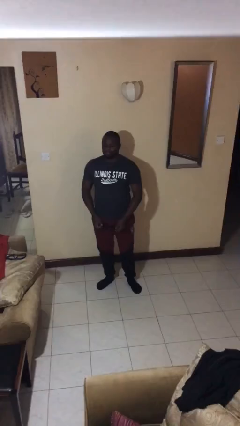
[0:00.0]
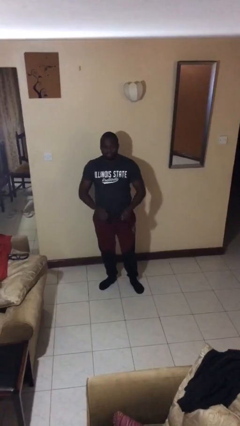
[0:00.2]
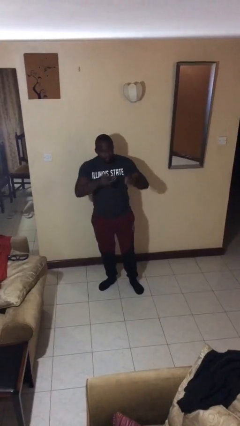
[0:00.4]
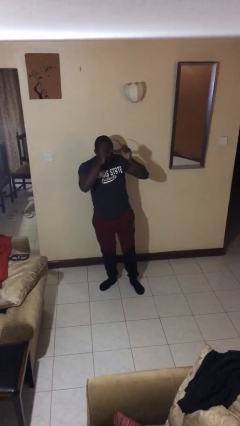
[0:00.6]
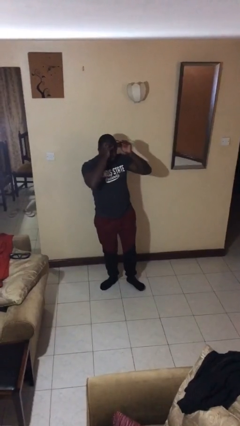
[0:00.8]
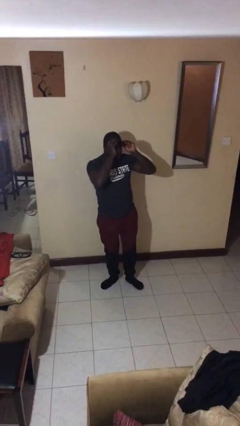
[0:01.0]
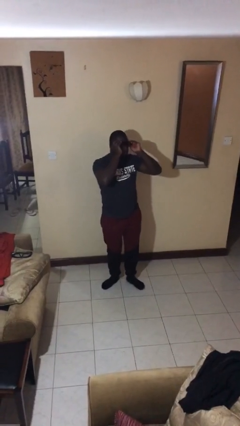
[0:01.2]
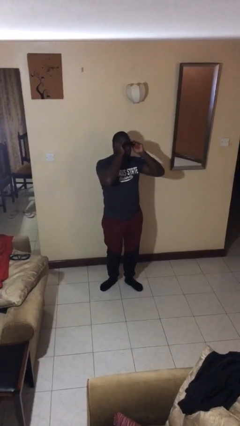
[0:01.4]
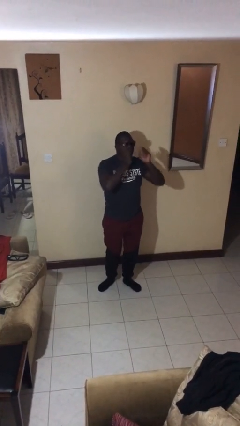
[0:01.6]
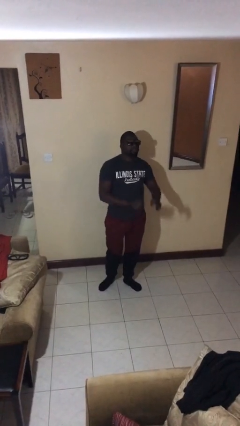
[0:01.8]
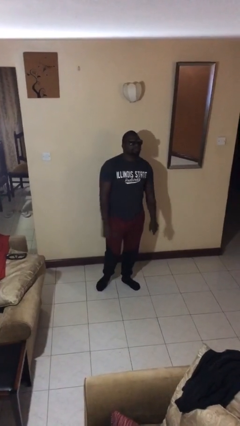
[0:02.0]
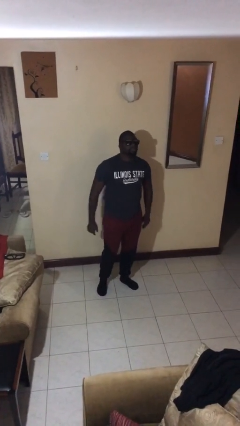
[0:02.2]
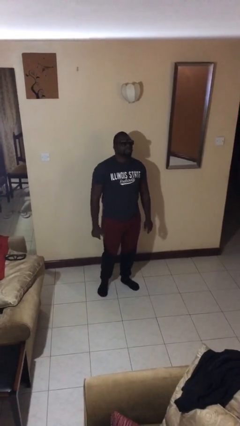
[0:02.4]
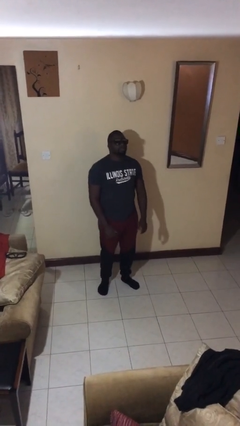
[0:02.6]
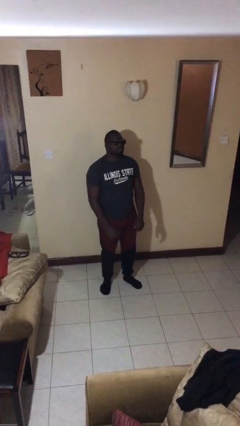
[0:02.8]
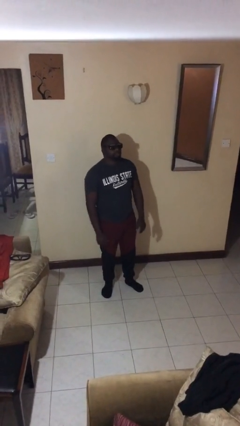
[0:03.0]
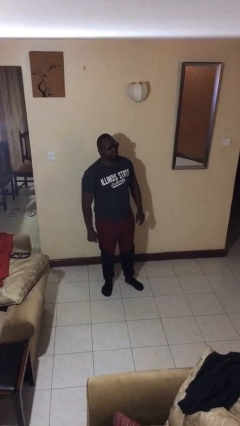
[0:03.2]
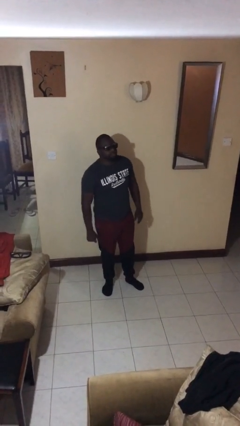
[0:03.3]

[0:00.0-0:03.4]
person puts on sunglasses

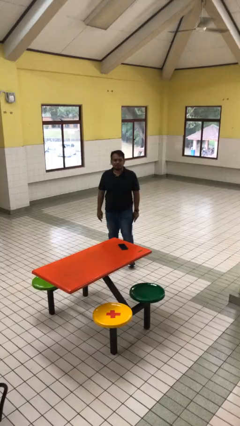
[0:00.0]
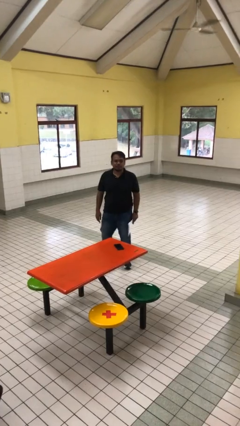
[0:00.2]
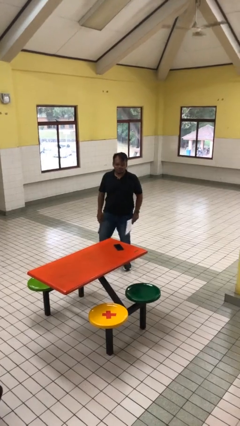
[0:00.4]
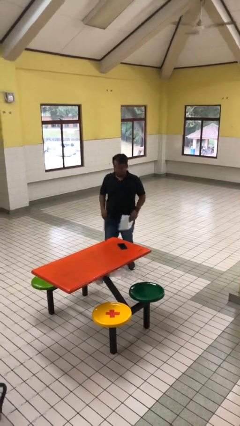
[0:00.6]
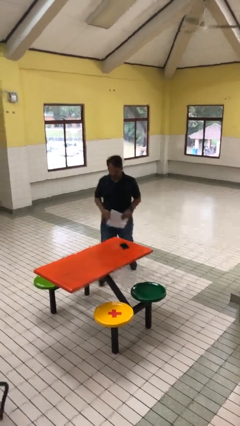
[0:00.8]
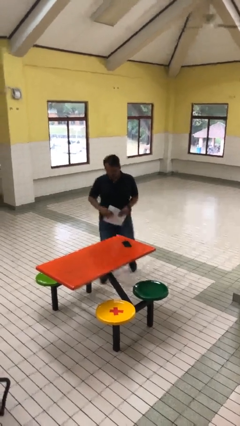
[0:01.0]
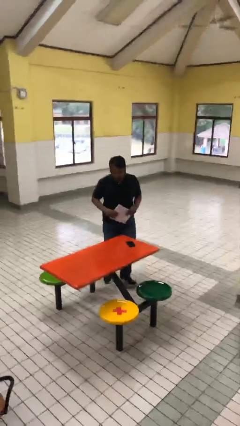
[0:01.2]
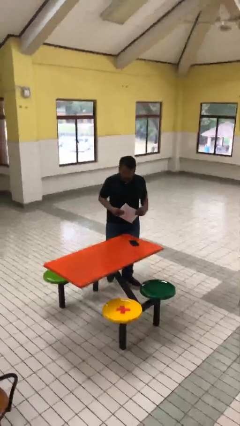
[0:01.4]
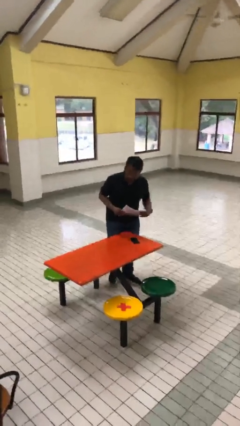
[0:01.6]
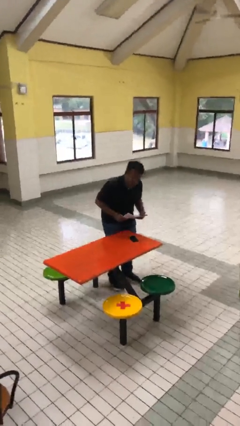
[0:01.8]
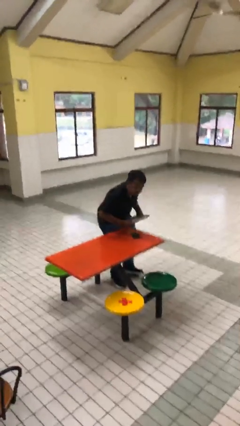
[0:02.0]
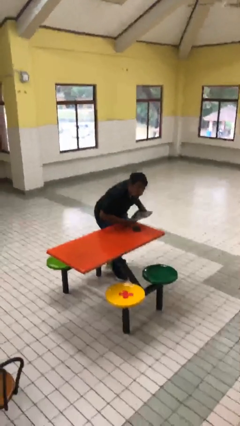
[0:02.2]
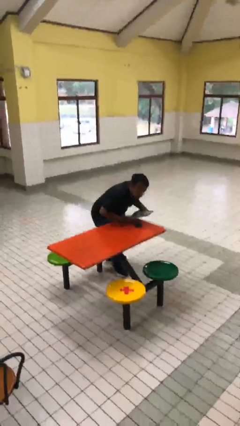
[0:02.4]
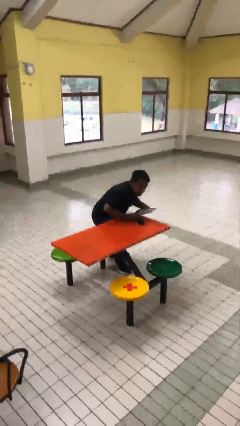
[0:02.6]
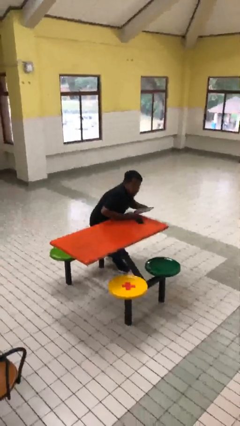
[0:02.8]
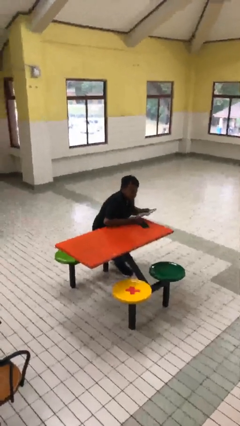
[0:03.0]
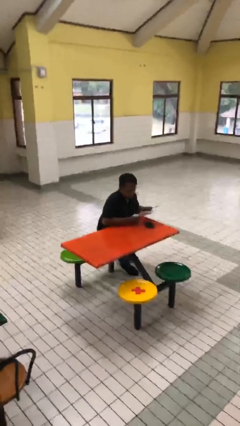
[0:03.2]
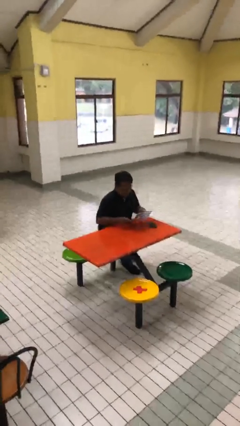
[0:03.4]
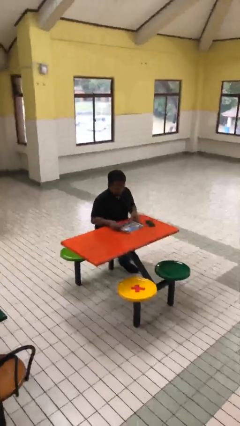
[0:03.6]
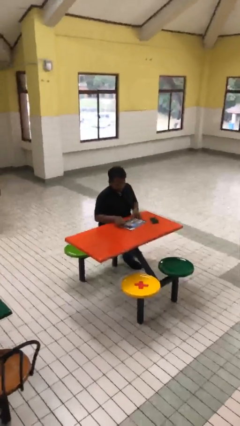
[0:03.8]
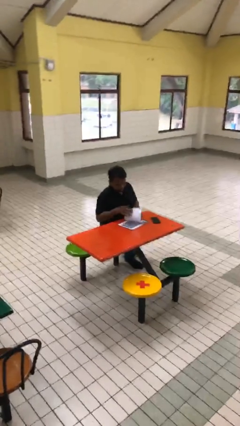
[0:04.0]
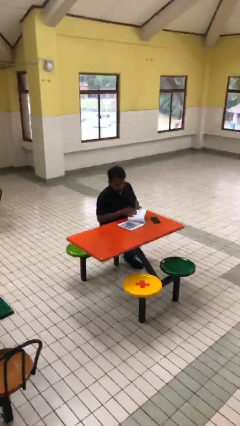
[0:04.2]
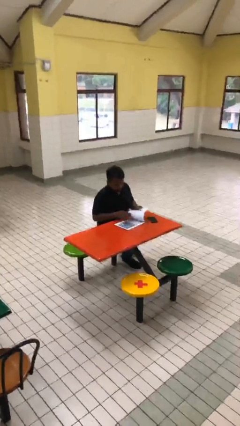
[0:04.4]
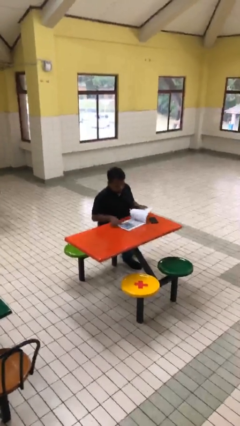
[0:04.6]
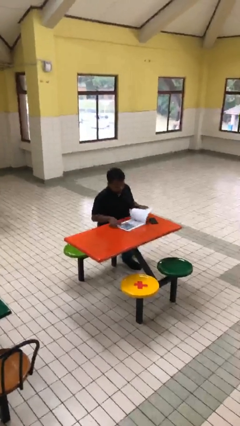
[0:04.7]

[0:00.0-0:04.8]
person sits down

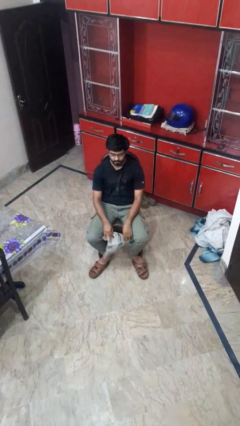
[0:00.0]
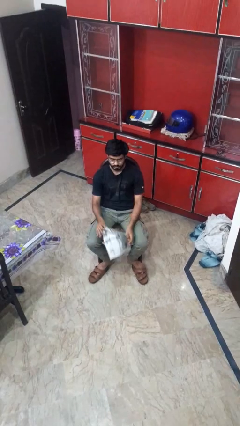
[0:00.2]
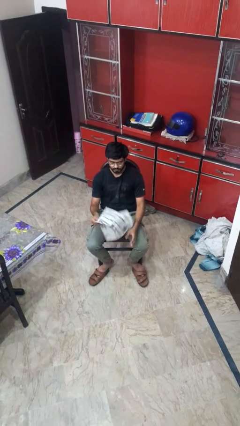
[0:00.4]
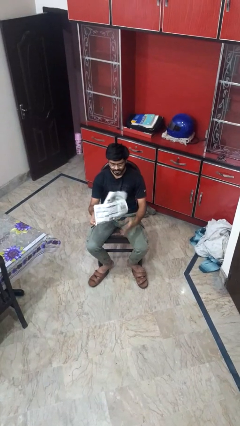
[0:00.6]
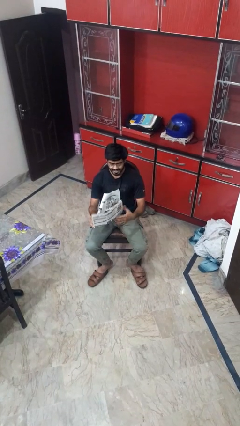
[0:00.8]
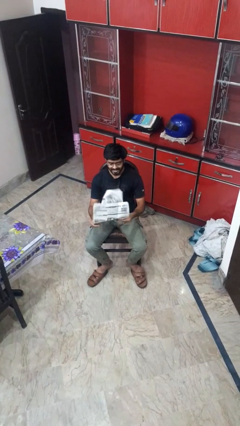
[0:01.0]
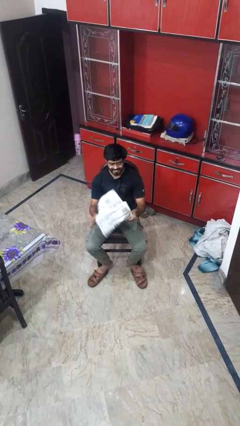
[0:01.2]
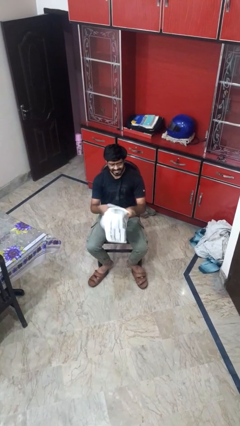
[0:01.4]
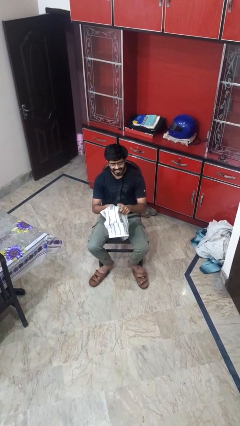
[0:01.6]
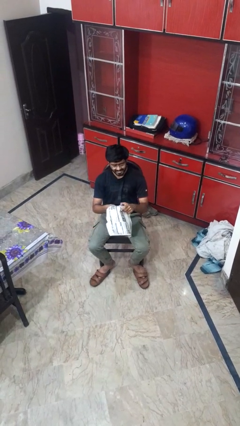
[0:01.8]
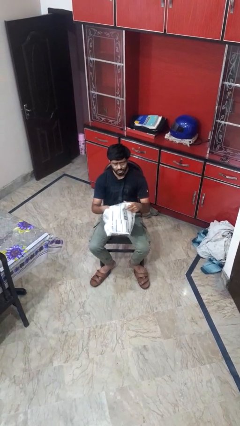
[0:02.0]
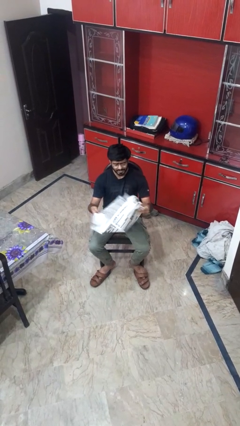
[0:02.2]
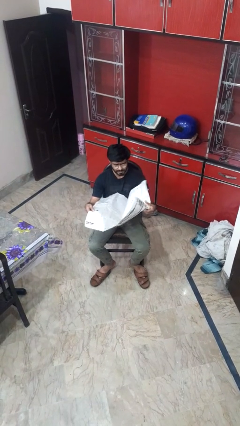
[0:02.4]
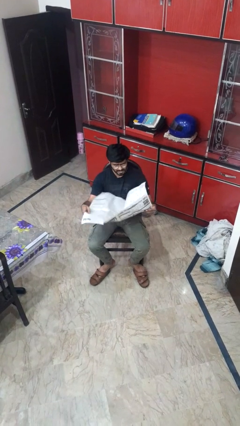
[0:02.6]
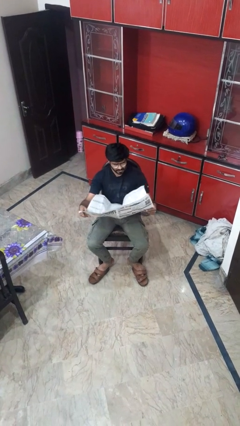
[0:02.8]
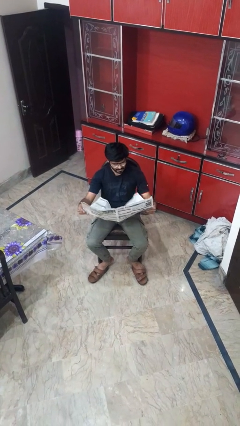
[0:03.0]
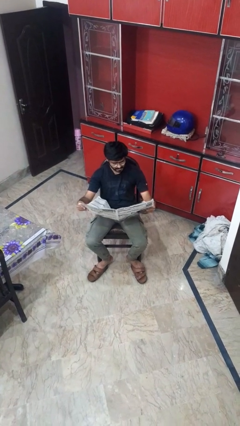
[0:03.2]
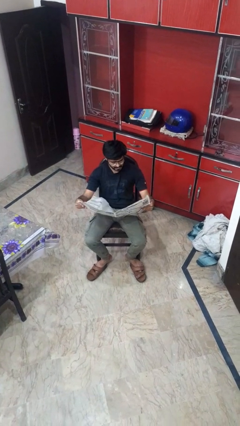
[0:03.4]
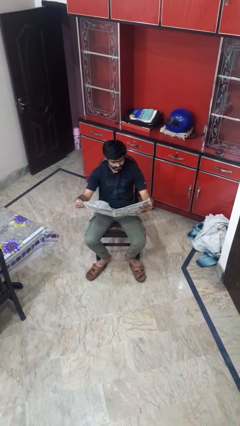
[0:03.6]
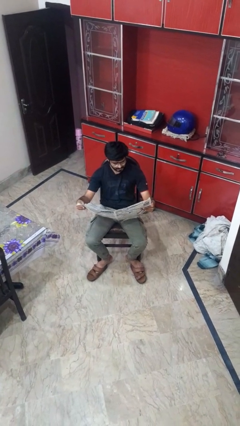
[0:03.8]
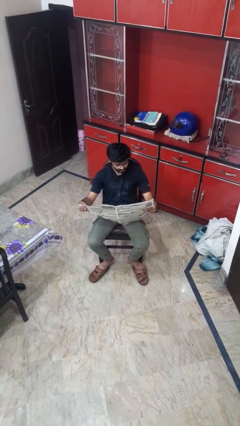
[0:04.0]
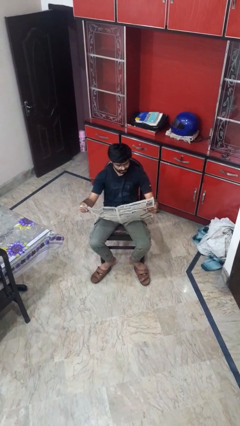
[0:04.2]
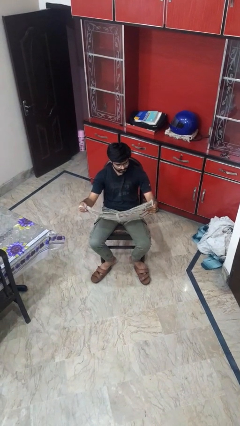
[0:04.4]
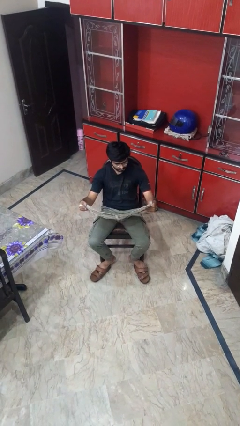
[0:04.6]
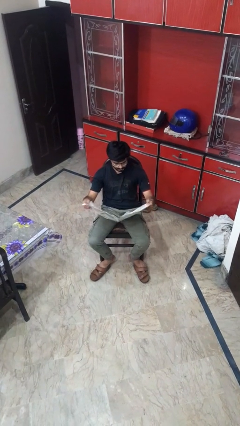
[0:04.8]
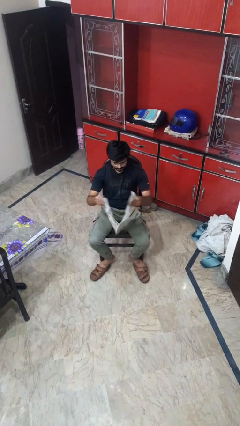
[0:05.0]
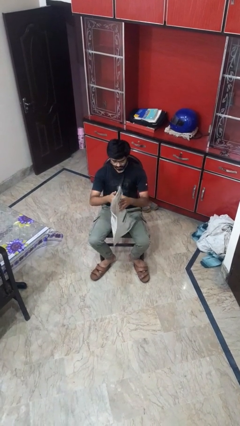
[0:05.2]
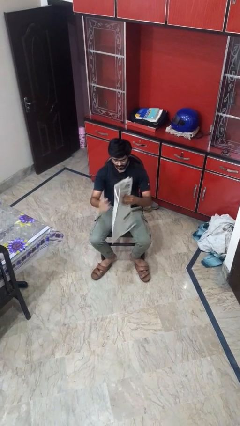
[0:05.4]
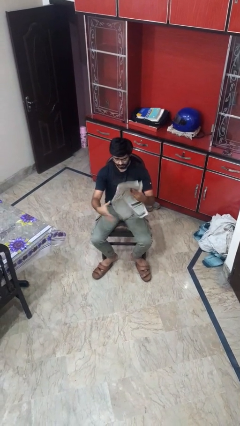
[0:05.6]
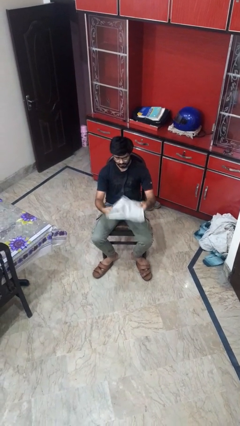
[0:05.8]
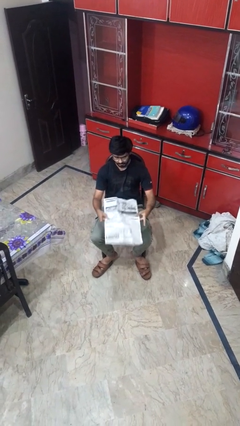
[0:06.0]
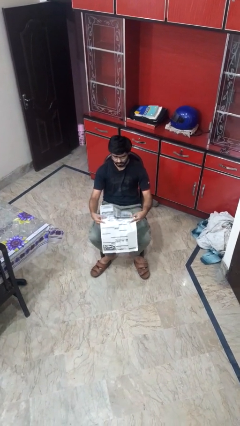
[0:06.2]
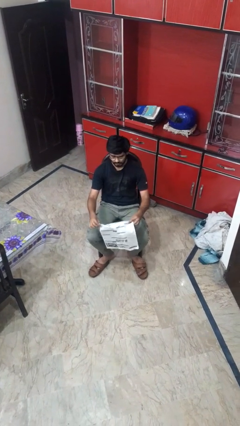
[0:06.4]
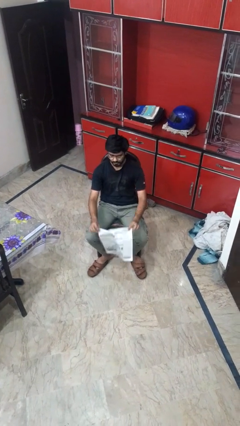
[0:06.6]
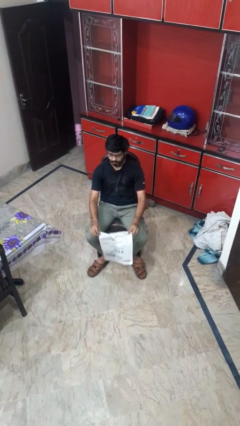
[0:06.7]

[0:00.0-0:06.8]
person reads newspaper

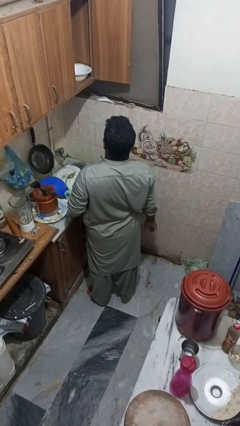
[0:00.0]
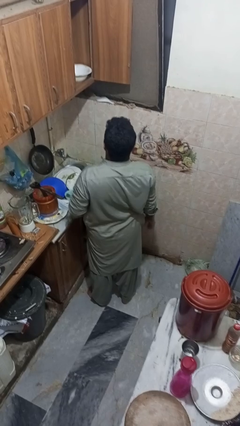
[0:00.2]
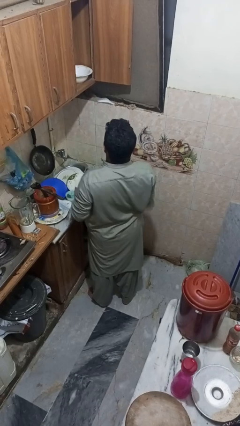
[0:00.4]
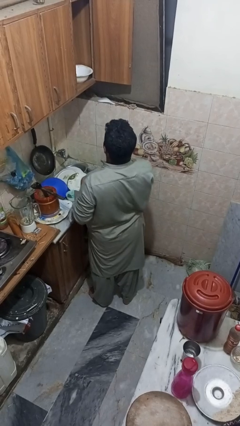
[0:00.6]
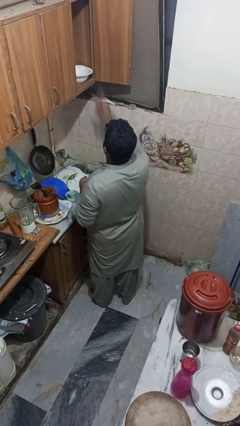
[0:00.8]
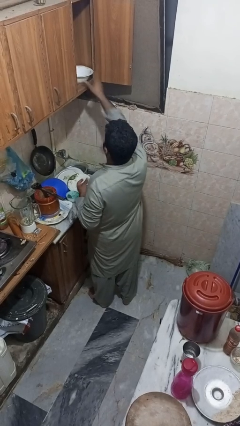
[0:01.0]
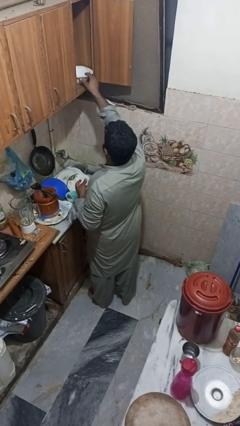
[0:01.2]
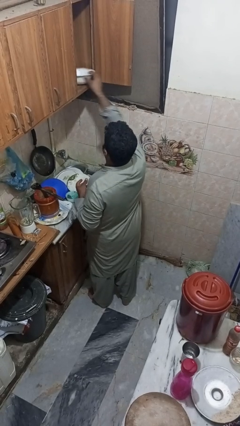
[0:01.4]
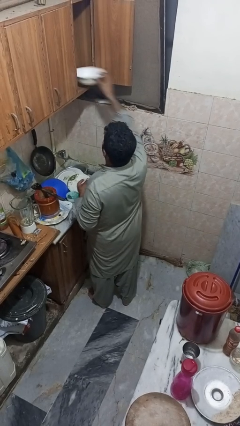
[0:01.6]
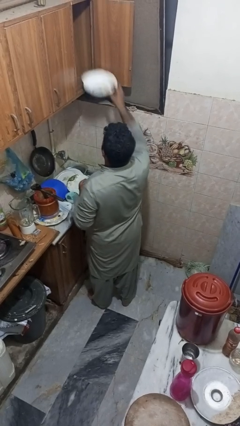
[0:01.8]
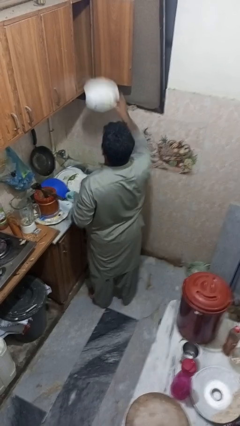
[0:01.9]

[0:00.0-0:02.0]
person takes object from cabinet

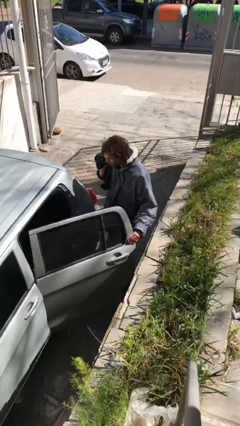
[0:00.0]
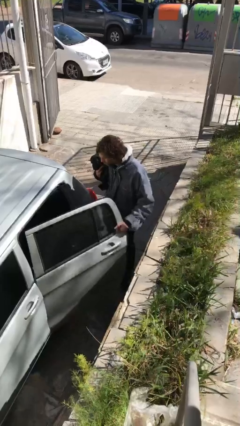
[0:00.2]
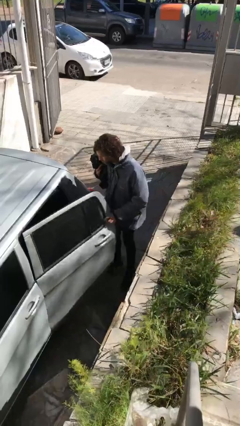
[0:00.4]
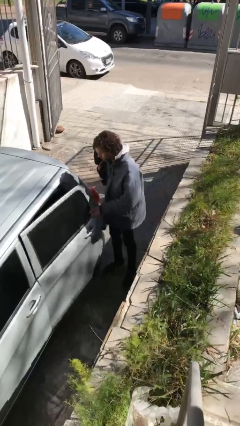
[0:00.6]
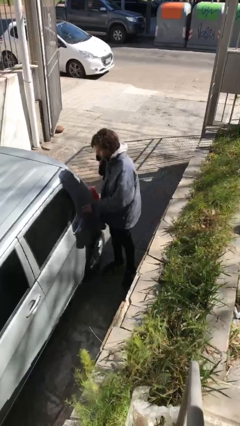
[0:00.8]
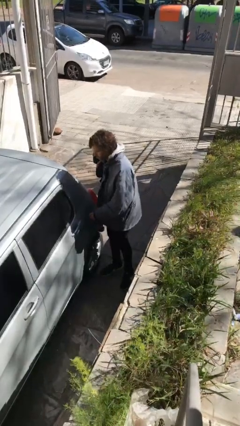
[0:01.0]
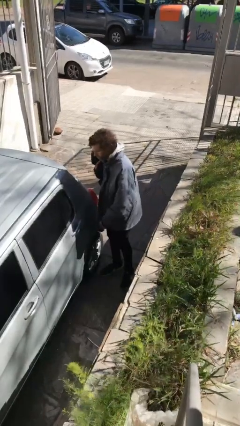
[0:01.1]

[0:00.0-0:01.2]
person closes car door
